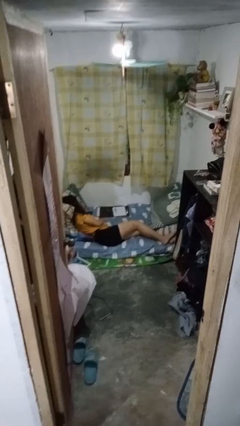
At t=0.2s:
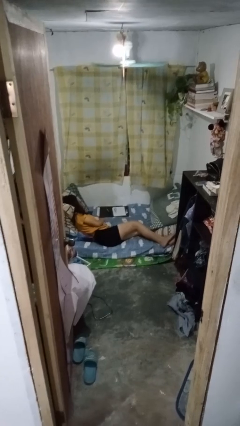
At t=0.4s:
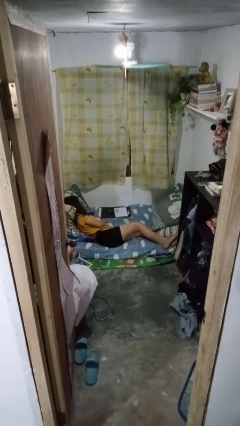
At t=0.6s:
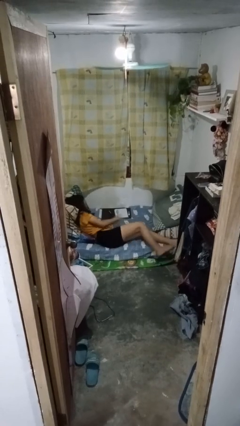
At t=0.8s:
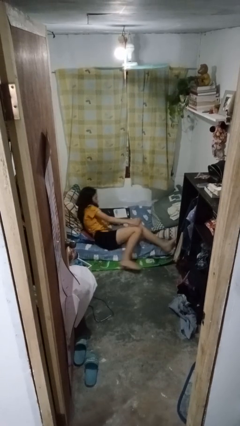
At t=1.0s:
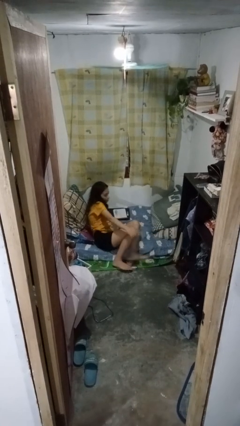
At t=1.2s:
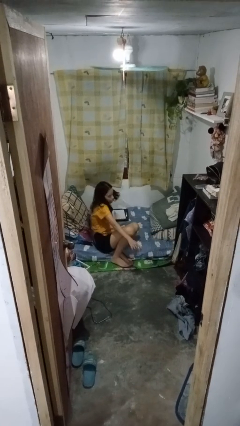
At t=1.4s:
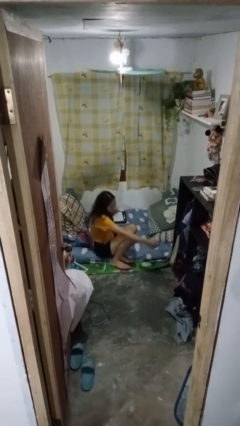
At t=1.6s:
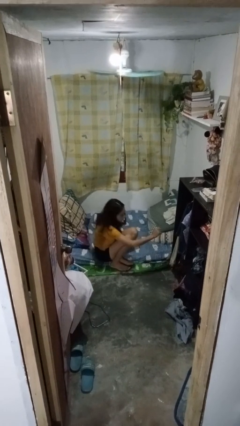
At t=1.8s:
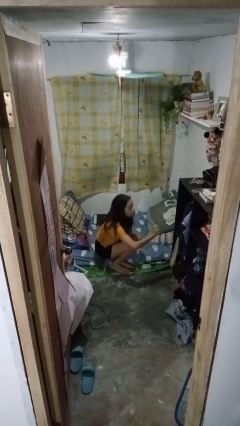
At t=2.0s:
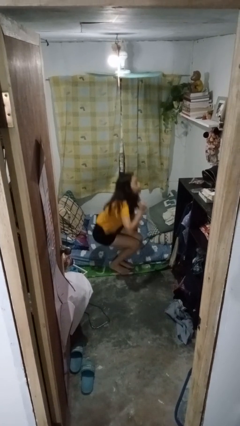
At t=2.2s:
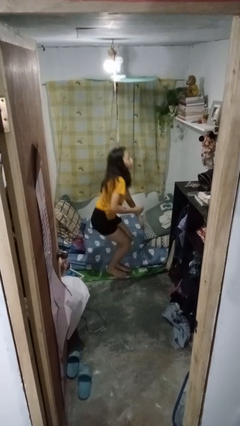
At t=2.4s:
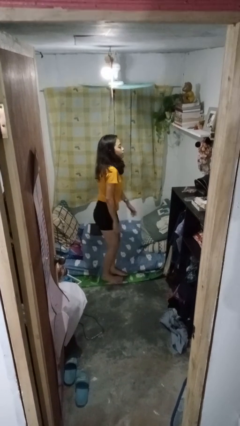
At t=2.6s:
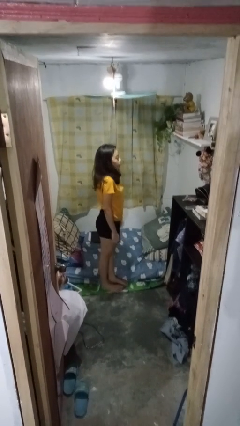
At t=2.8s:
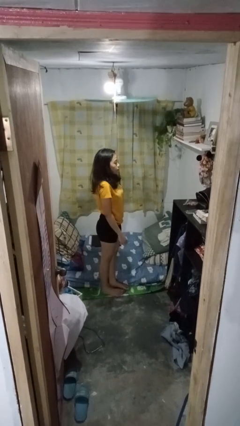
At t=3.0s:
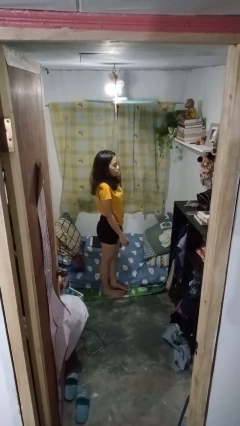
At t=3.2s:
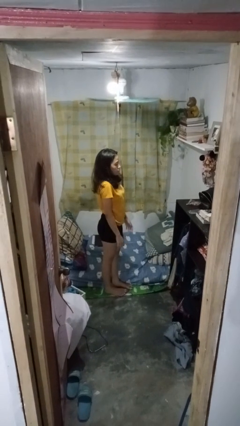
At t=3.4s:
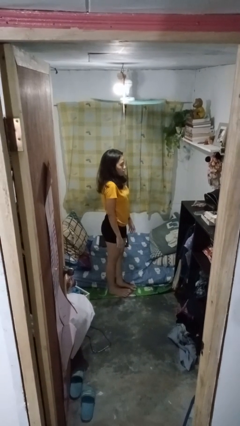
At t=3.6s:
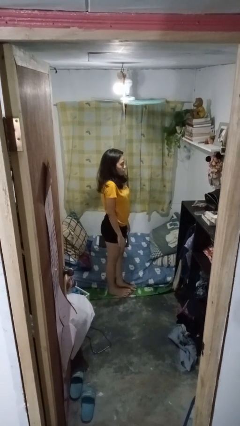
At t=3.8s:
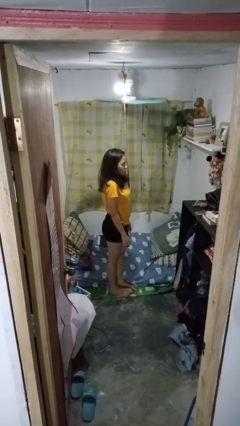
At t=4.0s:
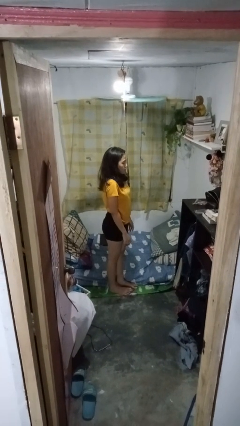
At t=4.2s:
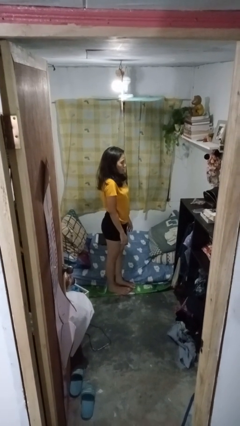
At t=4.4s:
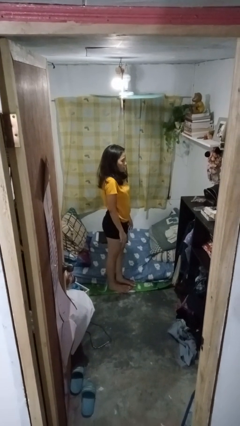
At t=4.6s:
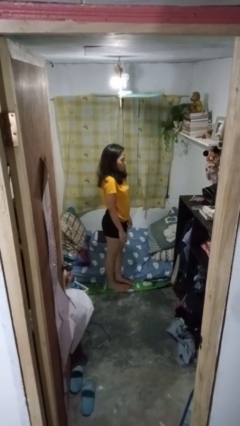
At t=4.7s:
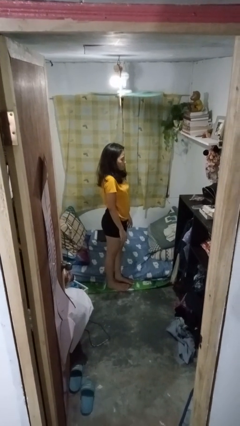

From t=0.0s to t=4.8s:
person stands up

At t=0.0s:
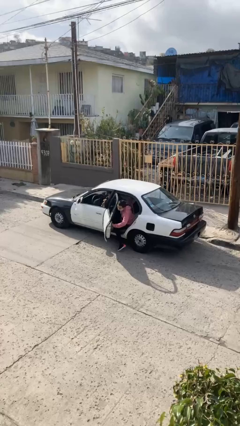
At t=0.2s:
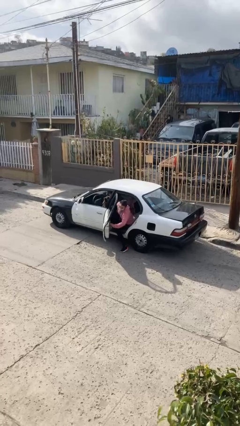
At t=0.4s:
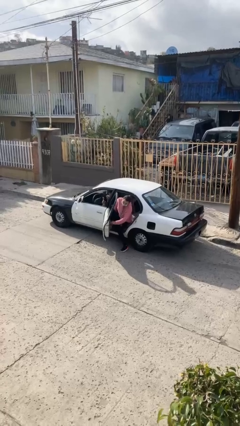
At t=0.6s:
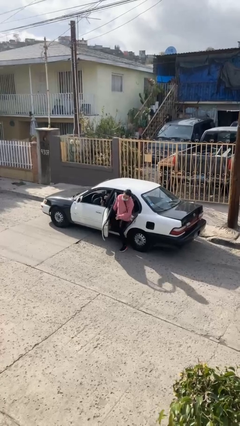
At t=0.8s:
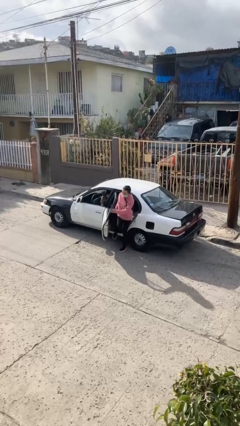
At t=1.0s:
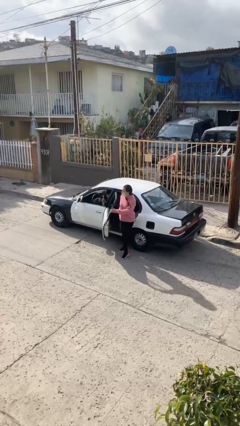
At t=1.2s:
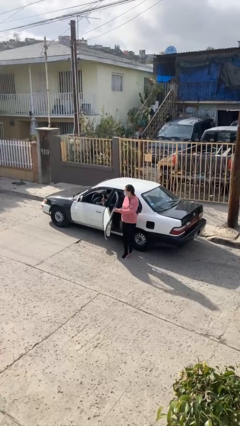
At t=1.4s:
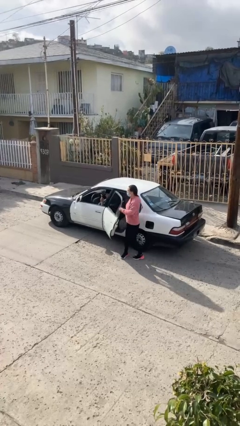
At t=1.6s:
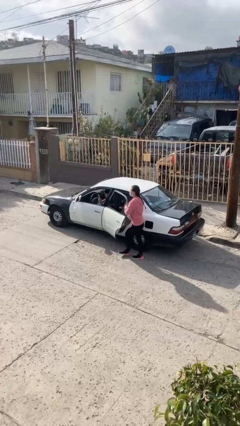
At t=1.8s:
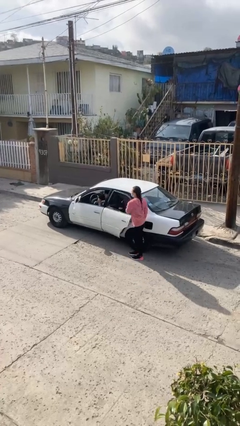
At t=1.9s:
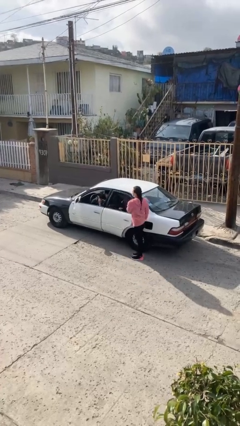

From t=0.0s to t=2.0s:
car drops off person

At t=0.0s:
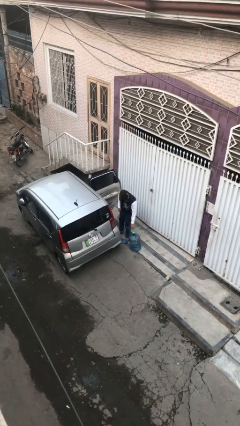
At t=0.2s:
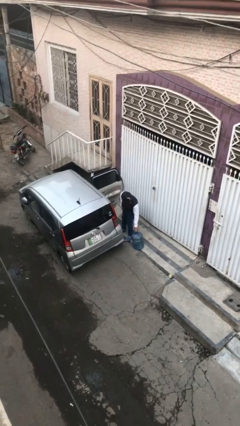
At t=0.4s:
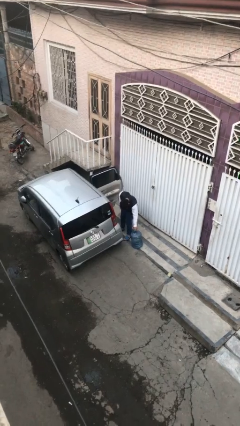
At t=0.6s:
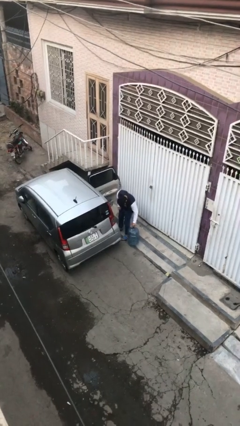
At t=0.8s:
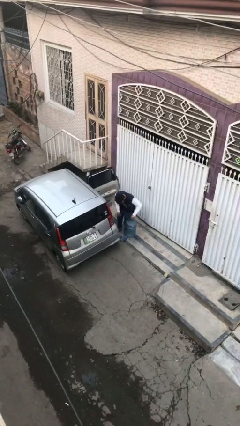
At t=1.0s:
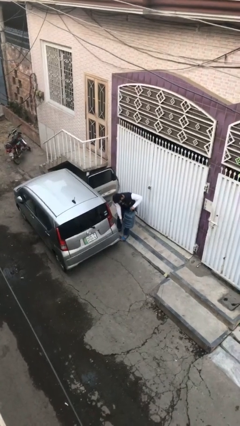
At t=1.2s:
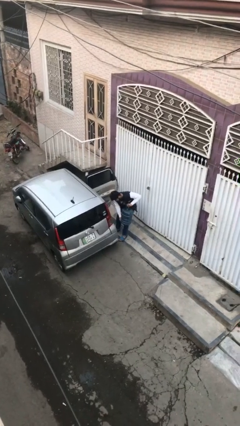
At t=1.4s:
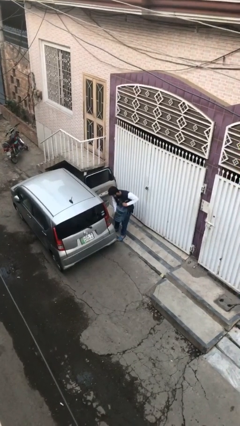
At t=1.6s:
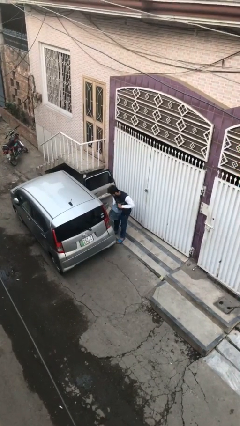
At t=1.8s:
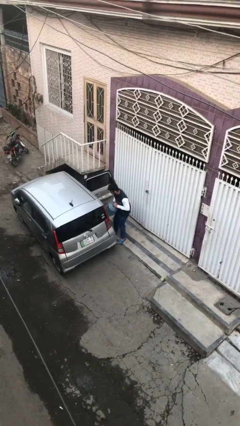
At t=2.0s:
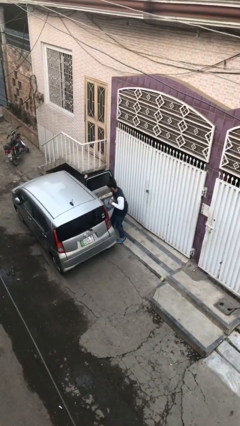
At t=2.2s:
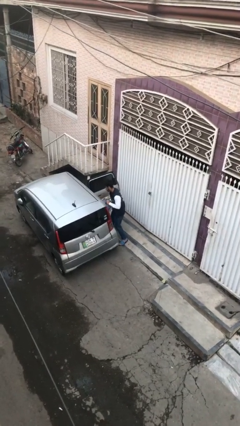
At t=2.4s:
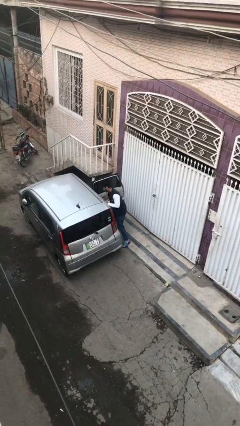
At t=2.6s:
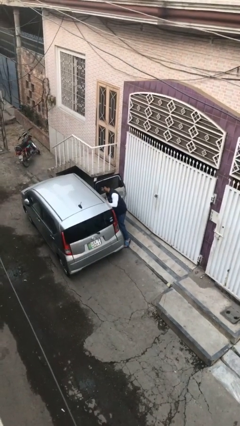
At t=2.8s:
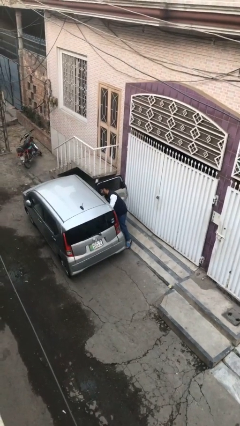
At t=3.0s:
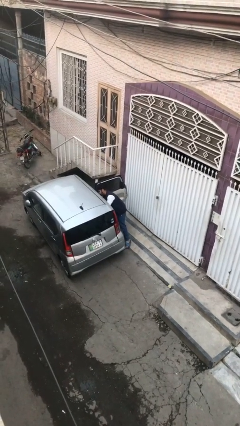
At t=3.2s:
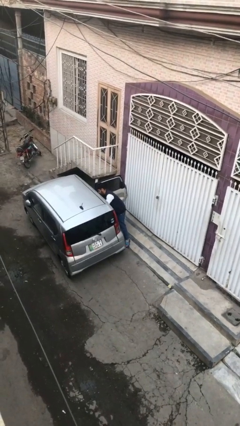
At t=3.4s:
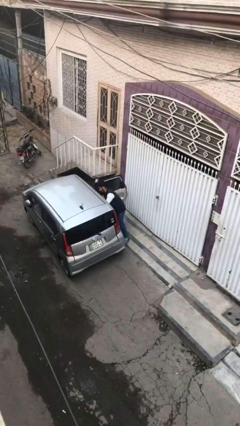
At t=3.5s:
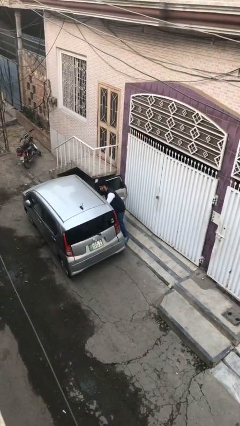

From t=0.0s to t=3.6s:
person loads car

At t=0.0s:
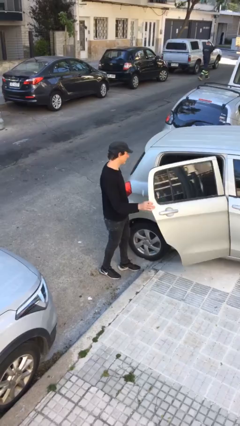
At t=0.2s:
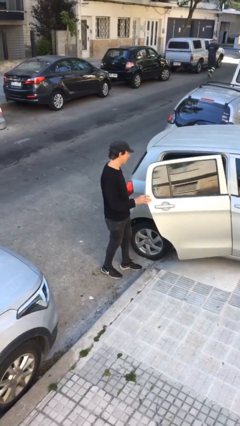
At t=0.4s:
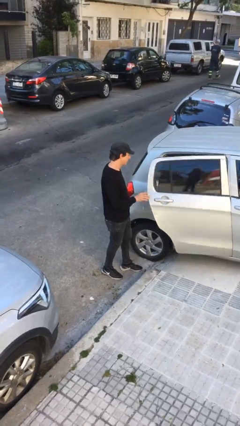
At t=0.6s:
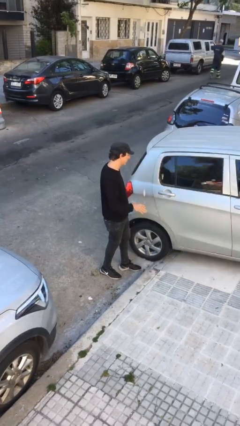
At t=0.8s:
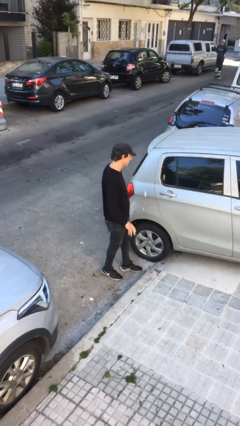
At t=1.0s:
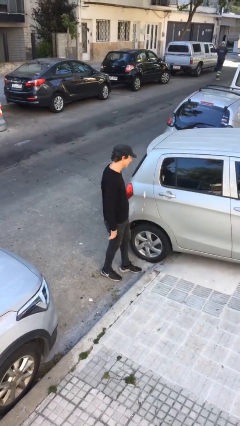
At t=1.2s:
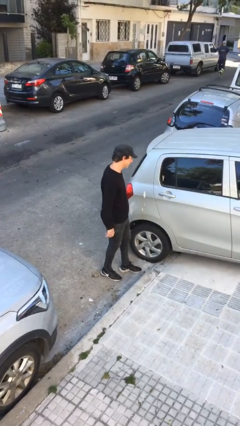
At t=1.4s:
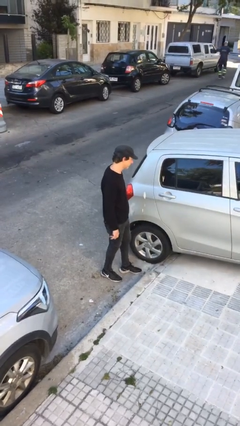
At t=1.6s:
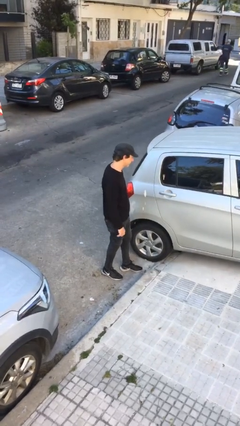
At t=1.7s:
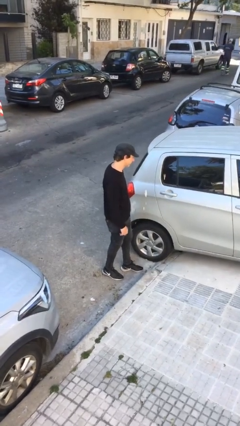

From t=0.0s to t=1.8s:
person closes car door

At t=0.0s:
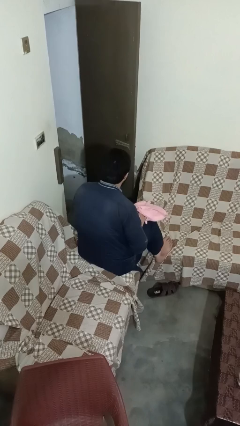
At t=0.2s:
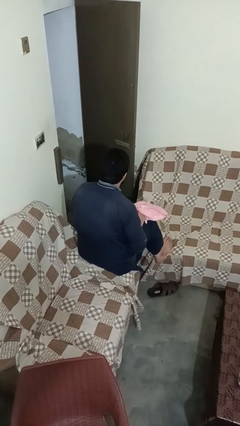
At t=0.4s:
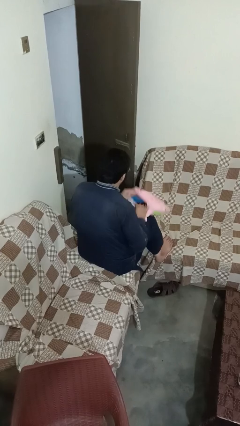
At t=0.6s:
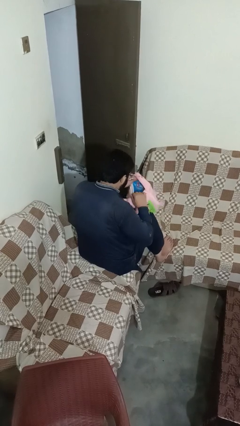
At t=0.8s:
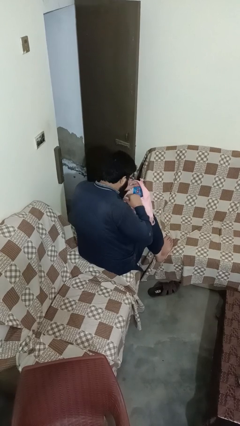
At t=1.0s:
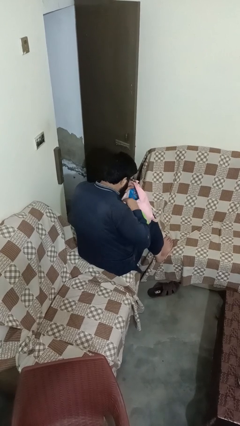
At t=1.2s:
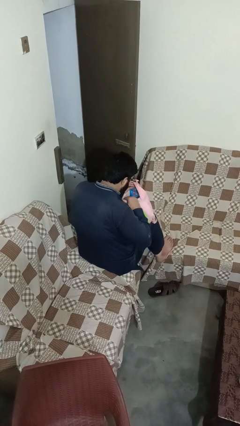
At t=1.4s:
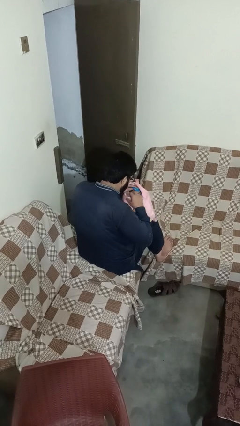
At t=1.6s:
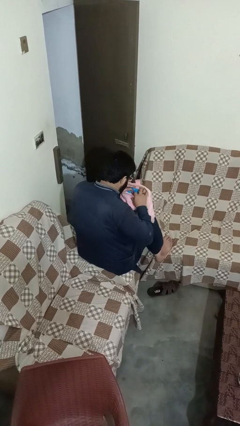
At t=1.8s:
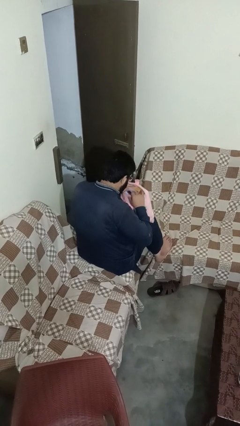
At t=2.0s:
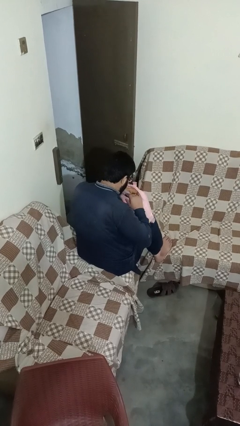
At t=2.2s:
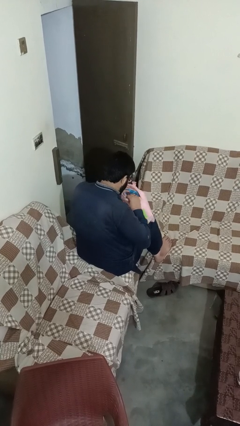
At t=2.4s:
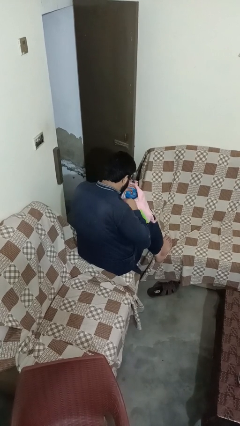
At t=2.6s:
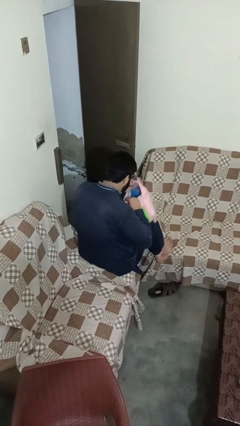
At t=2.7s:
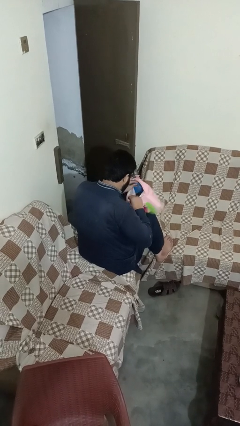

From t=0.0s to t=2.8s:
person searches in bag

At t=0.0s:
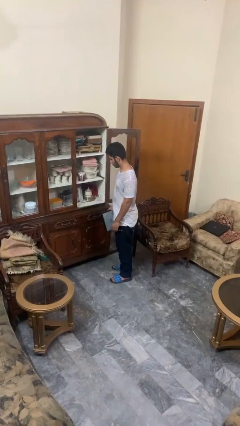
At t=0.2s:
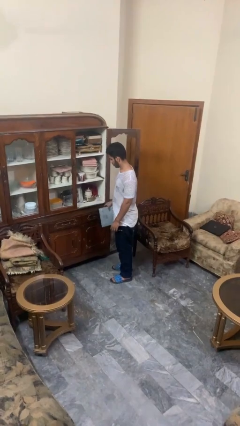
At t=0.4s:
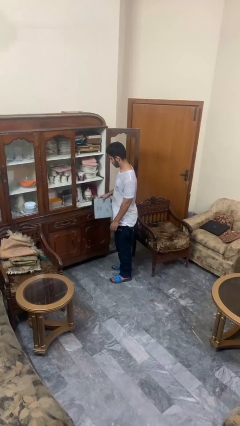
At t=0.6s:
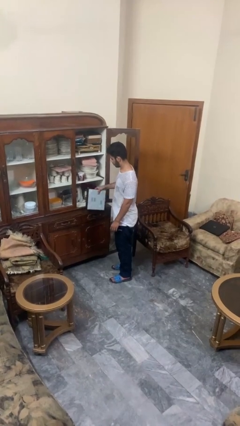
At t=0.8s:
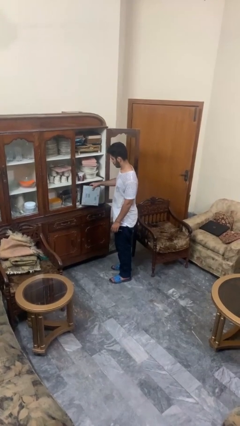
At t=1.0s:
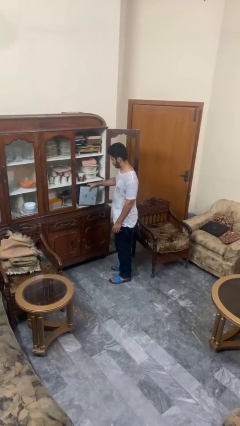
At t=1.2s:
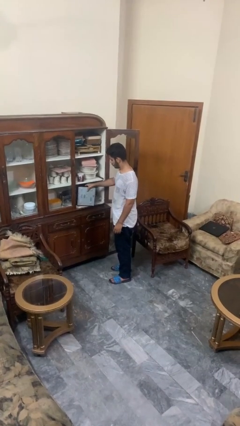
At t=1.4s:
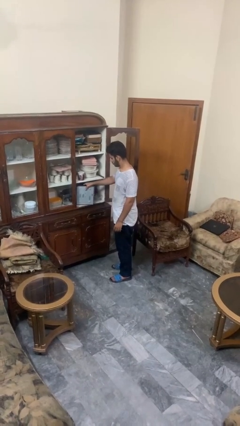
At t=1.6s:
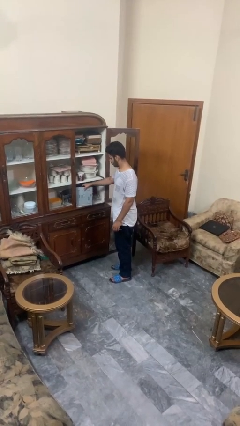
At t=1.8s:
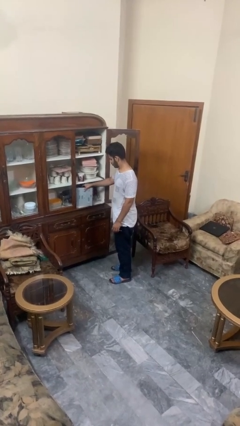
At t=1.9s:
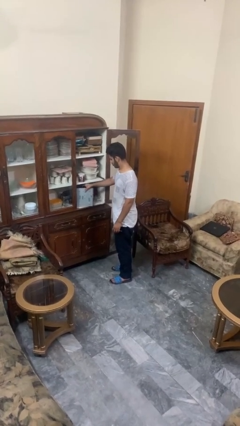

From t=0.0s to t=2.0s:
person puts down object into cabinet
